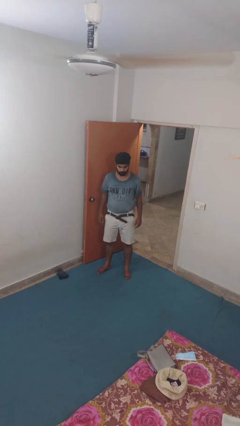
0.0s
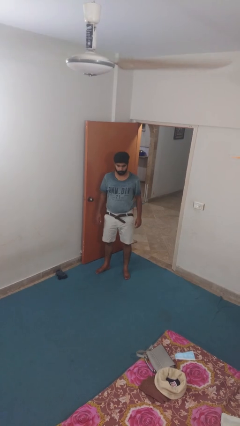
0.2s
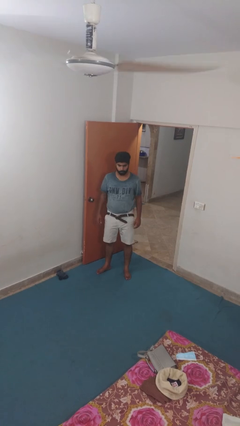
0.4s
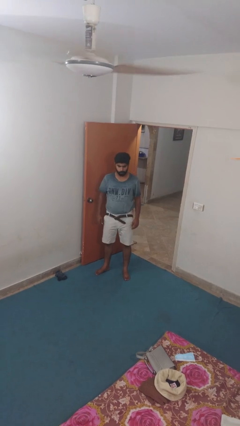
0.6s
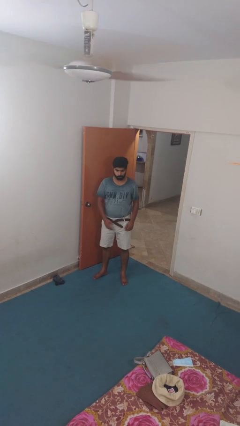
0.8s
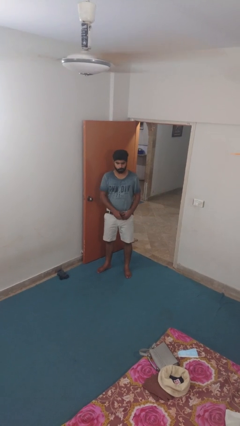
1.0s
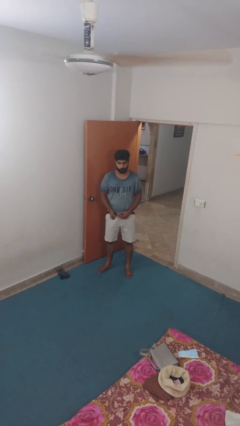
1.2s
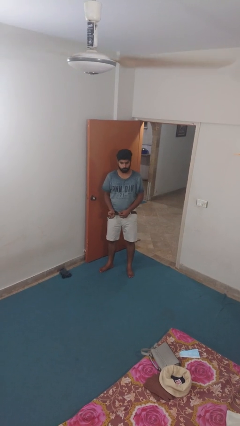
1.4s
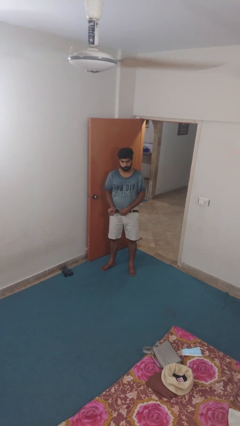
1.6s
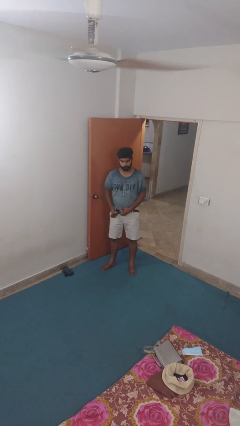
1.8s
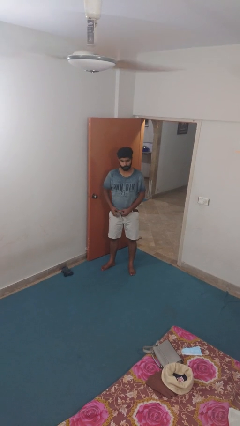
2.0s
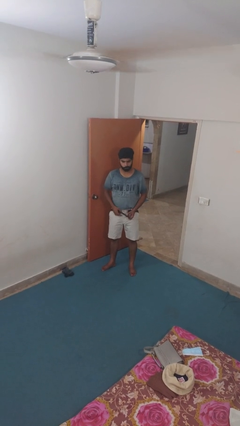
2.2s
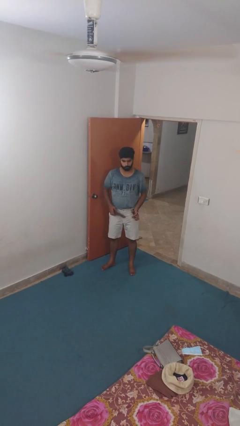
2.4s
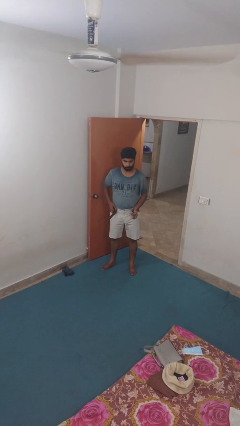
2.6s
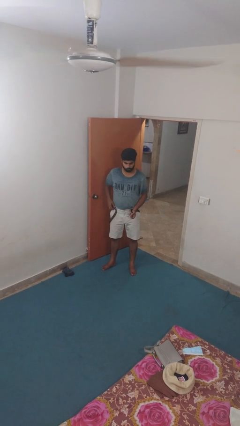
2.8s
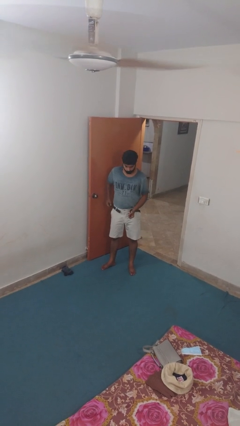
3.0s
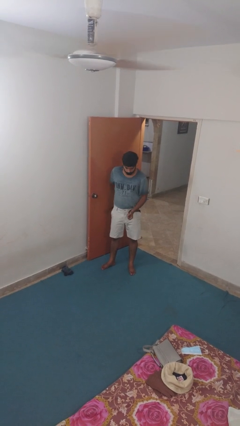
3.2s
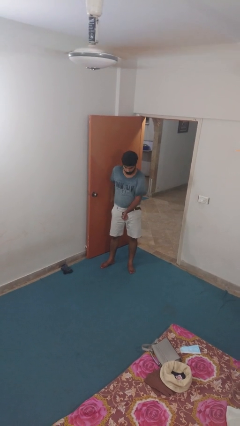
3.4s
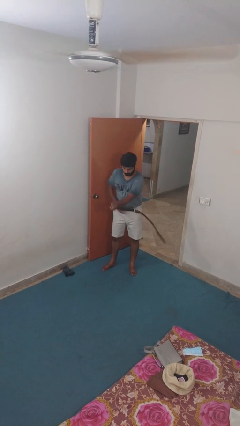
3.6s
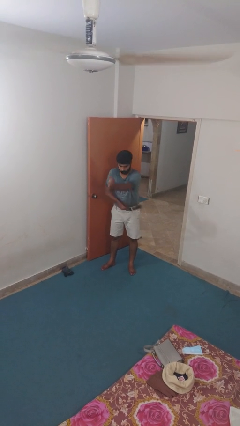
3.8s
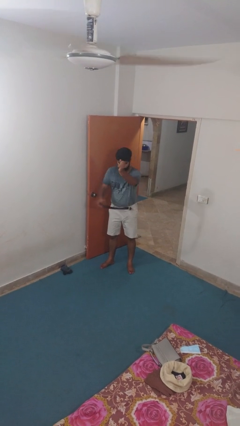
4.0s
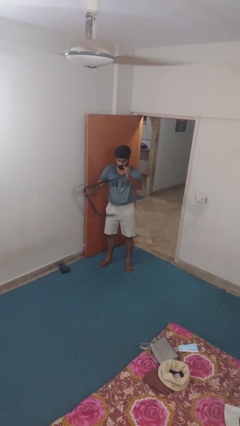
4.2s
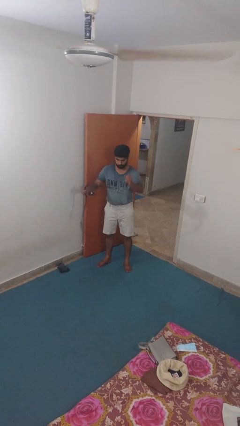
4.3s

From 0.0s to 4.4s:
person takes off belt

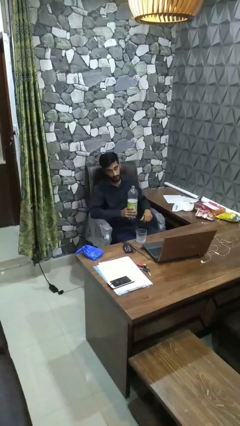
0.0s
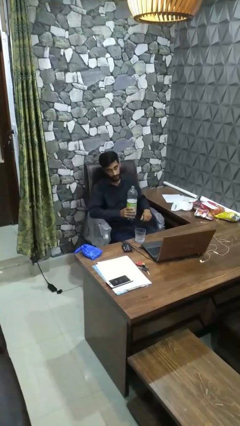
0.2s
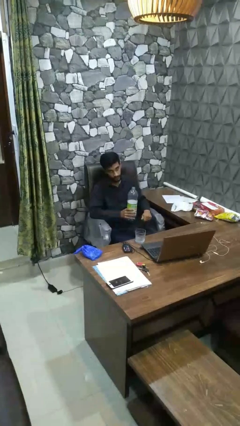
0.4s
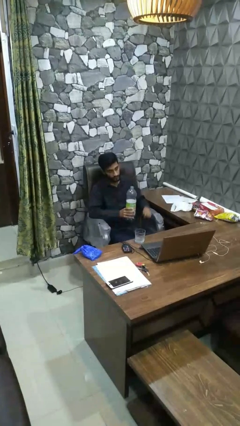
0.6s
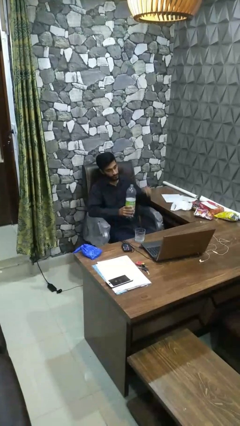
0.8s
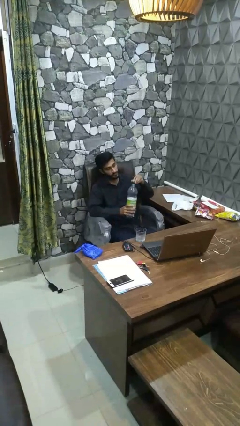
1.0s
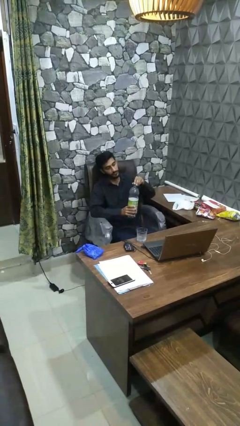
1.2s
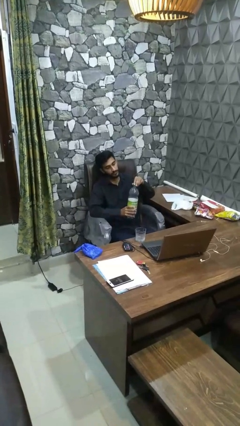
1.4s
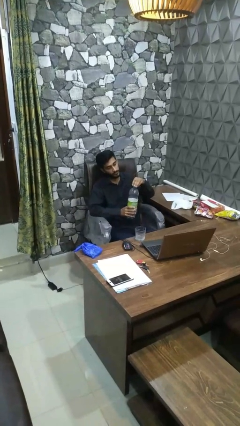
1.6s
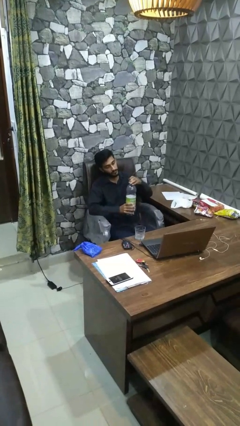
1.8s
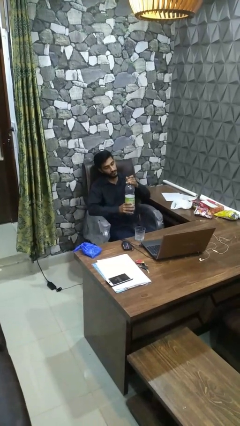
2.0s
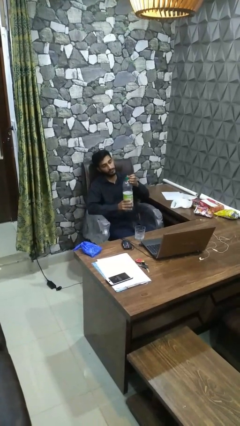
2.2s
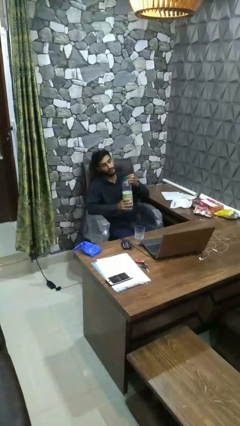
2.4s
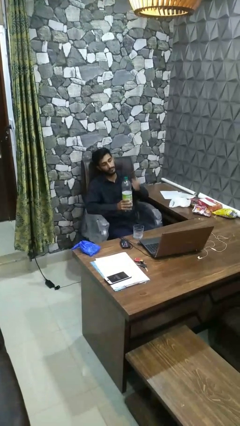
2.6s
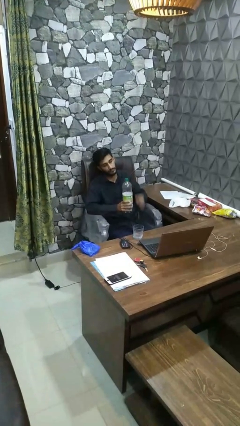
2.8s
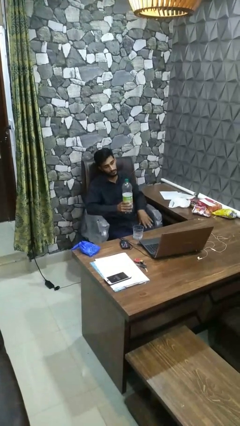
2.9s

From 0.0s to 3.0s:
person screws lid to bottle

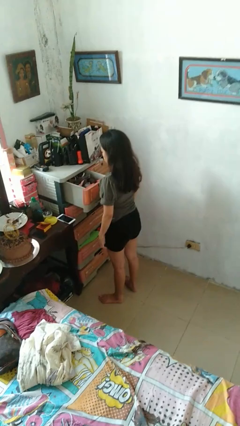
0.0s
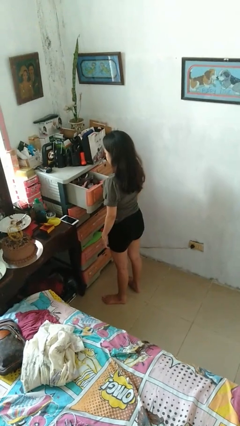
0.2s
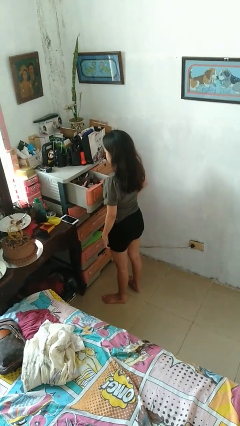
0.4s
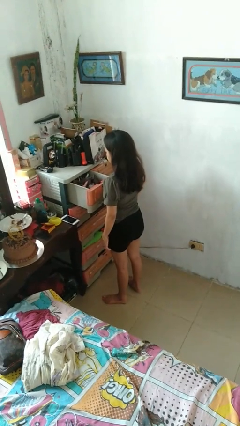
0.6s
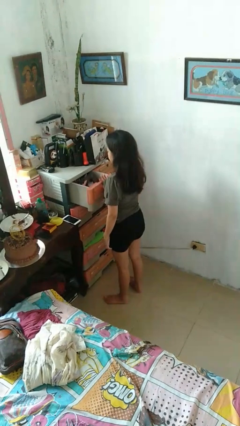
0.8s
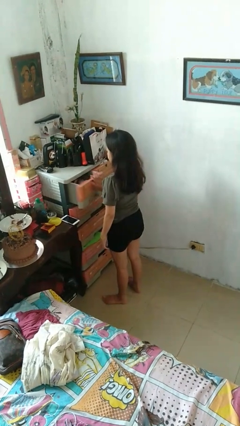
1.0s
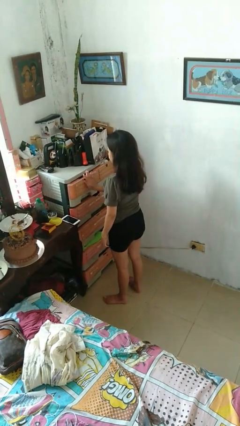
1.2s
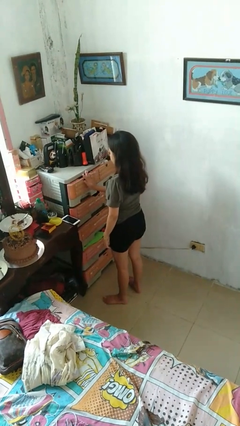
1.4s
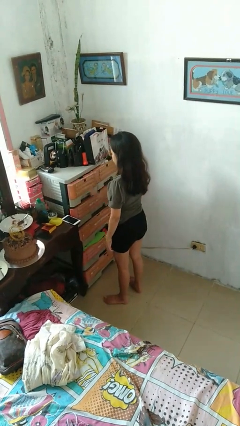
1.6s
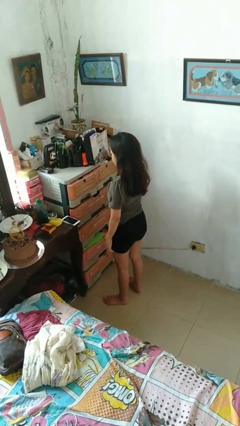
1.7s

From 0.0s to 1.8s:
person closes dresser drawer

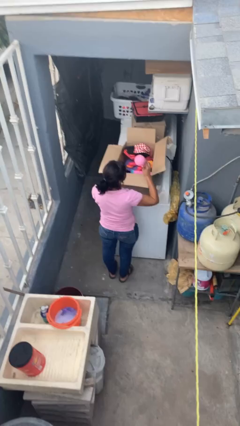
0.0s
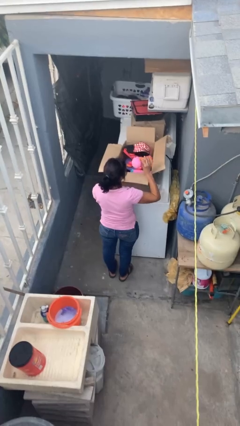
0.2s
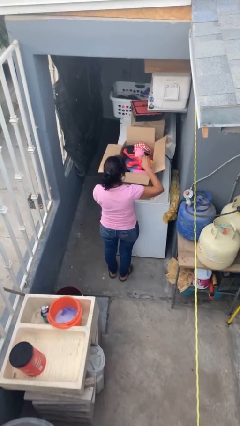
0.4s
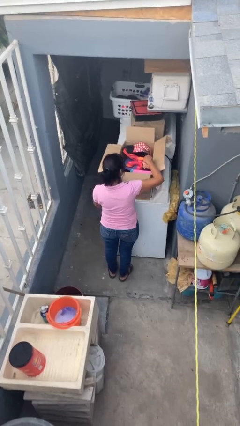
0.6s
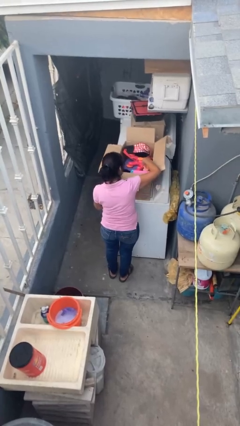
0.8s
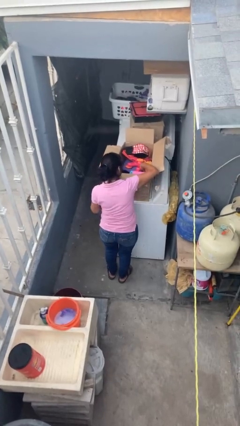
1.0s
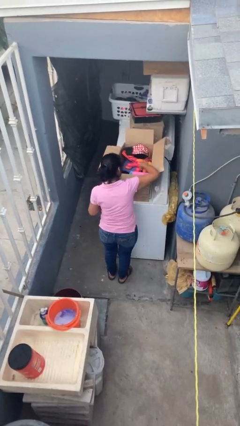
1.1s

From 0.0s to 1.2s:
person puts object into box

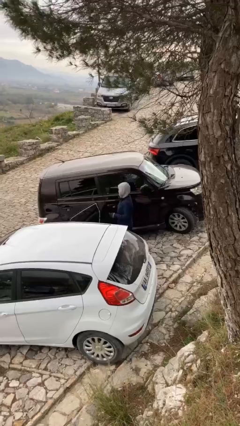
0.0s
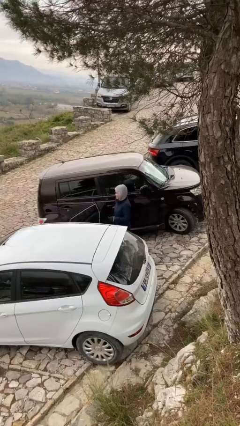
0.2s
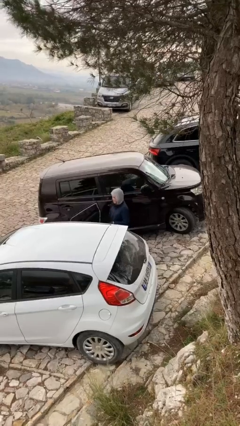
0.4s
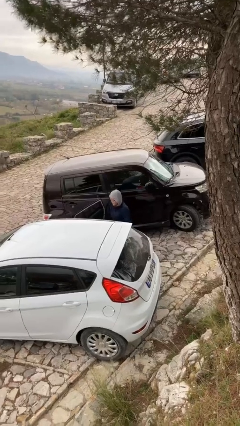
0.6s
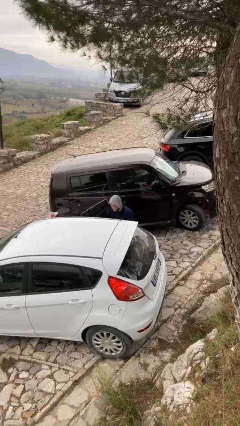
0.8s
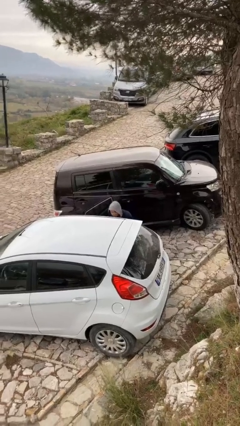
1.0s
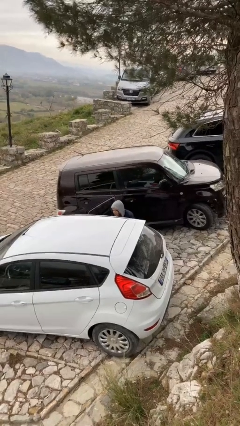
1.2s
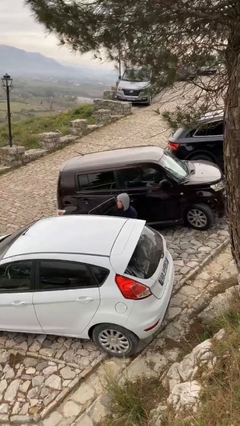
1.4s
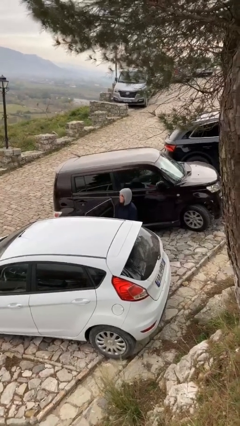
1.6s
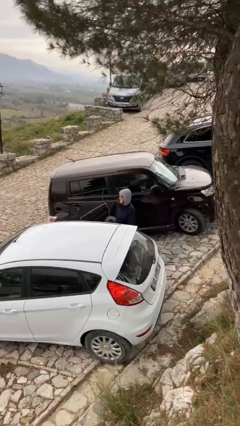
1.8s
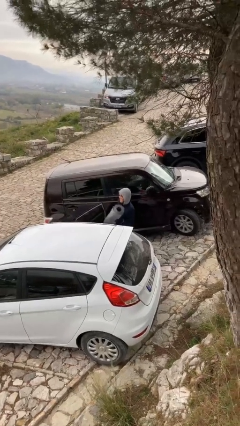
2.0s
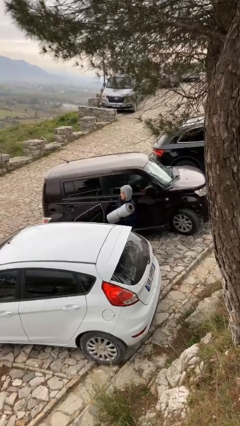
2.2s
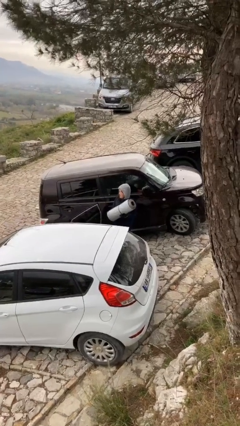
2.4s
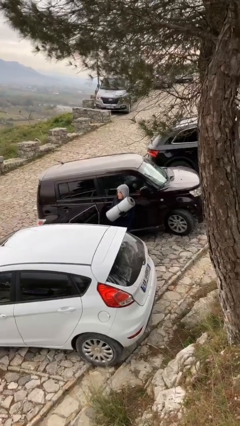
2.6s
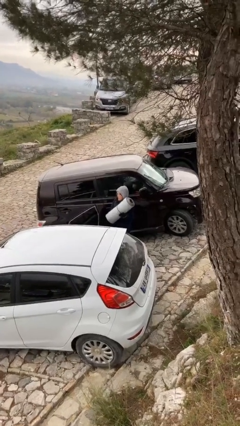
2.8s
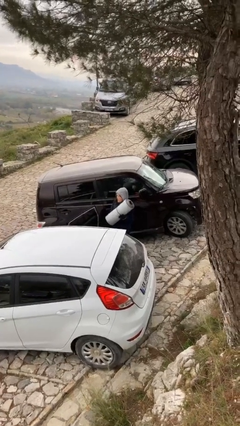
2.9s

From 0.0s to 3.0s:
person unloads car

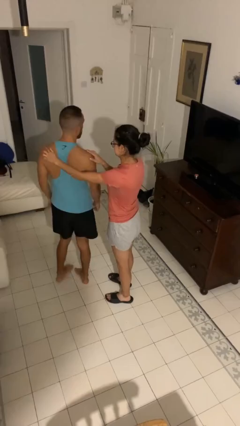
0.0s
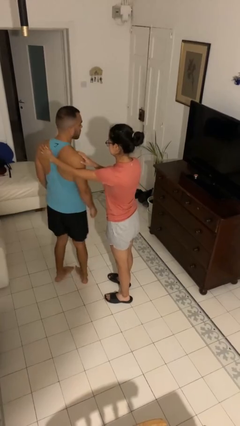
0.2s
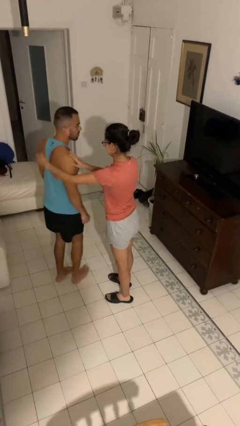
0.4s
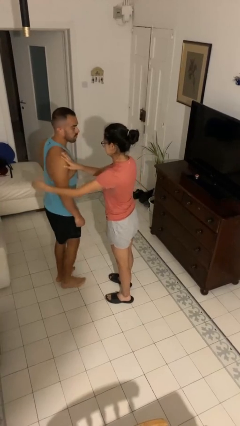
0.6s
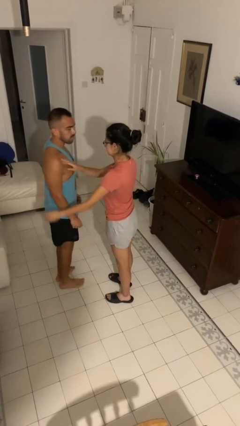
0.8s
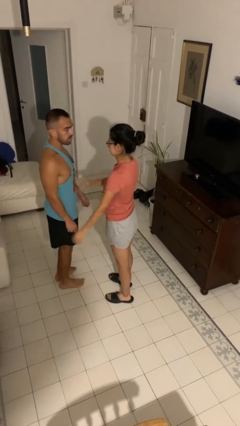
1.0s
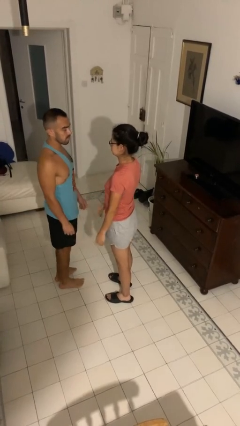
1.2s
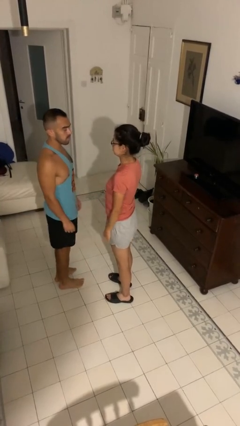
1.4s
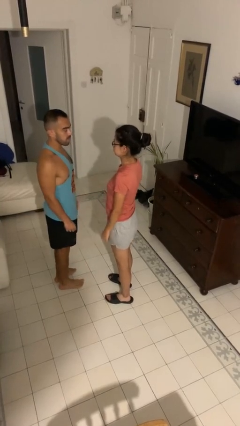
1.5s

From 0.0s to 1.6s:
person spins person around

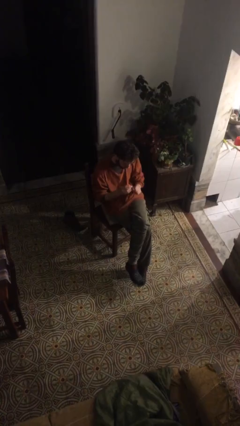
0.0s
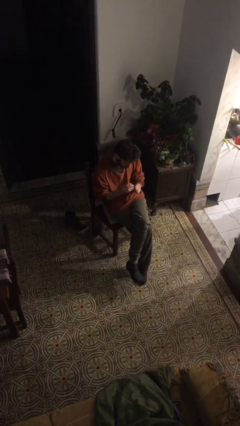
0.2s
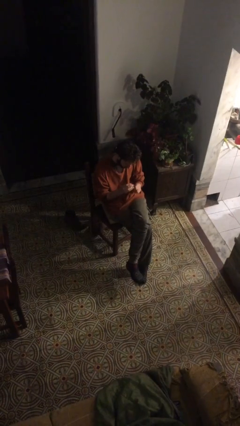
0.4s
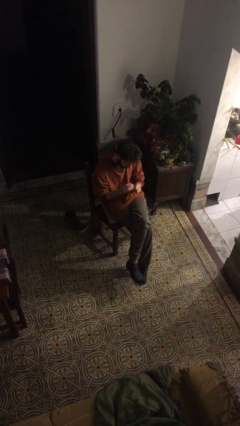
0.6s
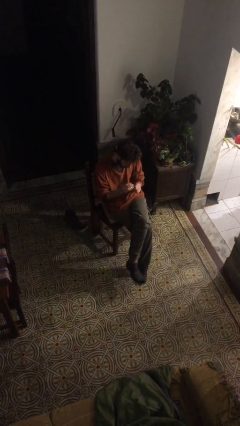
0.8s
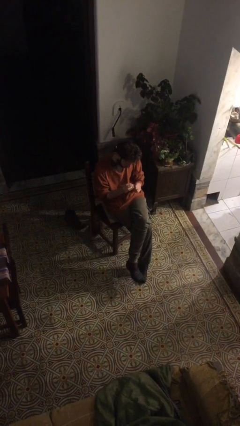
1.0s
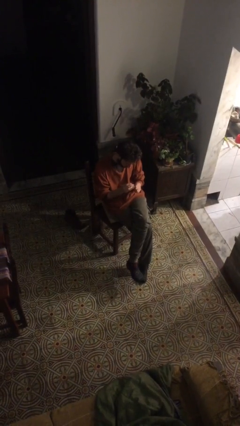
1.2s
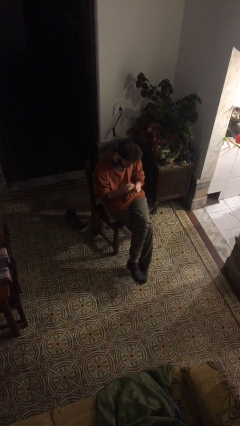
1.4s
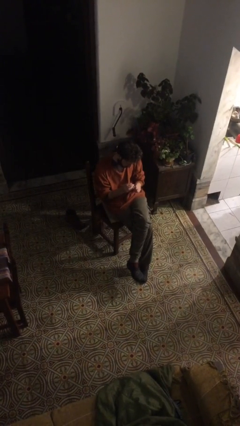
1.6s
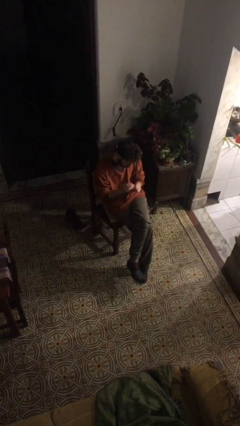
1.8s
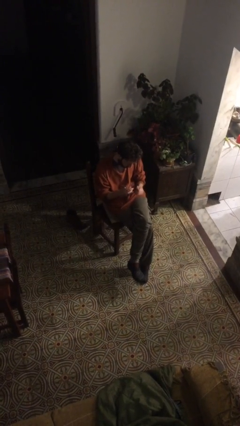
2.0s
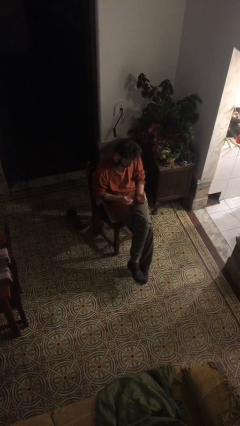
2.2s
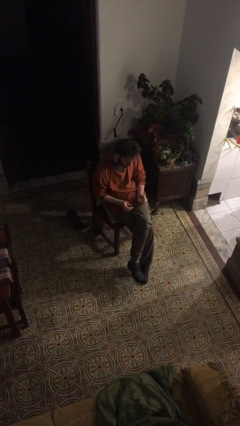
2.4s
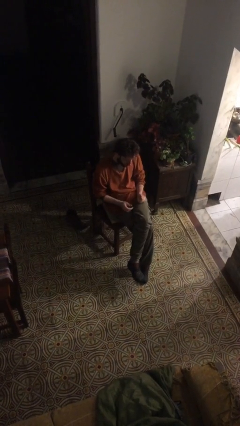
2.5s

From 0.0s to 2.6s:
person clips fingernails
